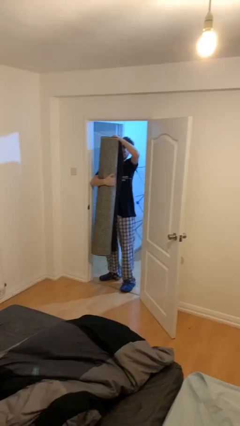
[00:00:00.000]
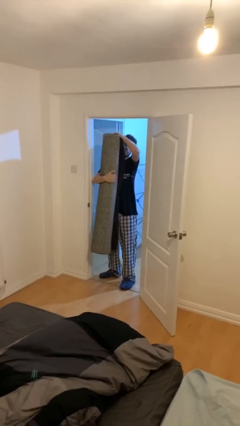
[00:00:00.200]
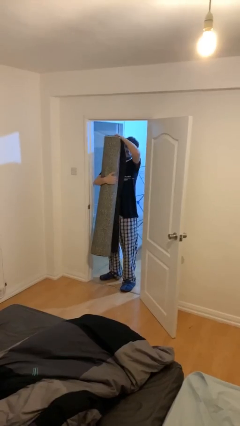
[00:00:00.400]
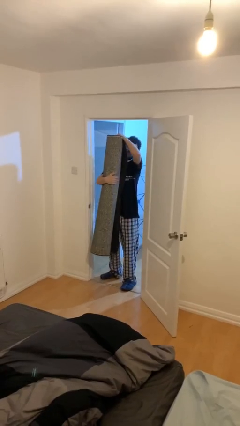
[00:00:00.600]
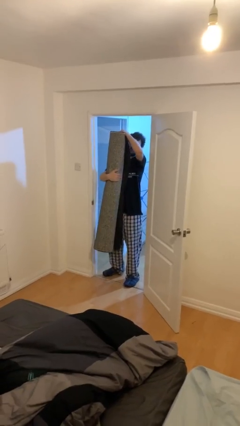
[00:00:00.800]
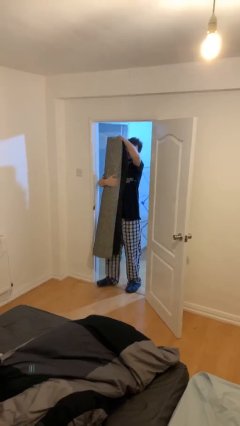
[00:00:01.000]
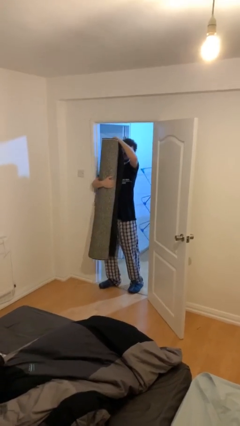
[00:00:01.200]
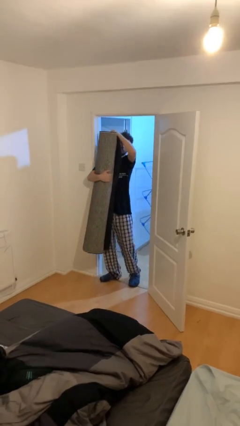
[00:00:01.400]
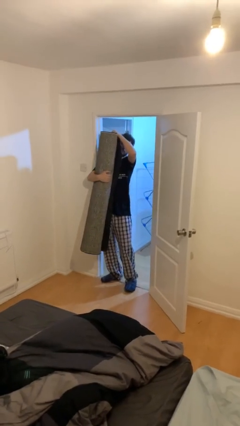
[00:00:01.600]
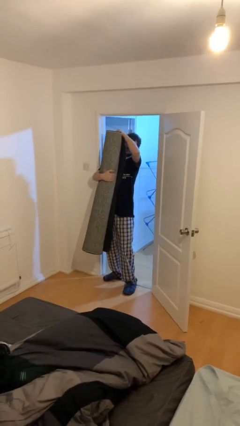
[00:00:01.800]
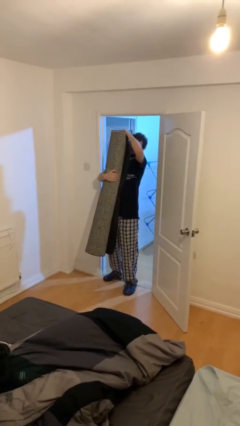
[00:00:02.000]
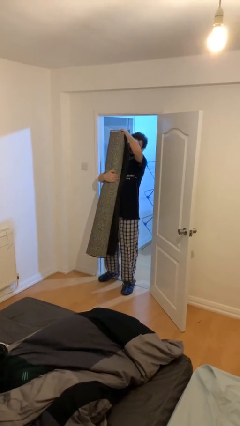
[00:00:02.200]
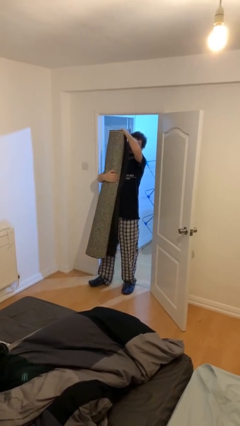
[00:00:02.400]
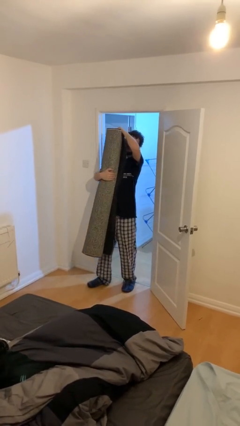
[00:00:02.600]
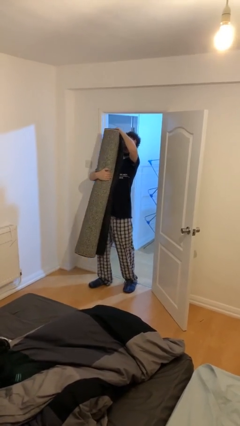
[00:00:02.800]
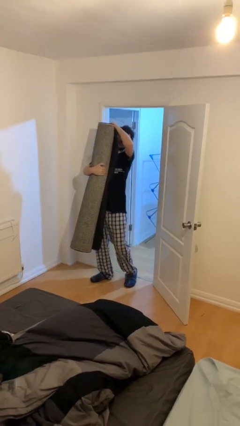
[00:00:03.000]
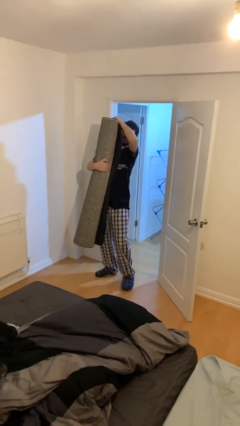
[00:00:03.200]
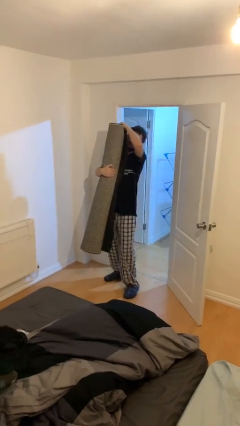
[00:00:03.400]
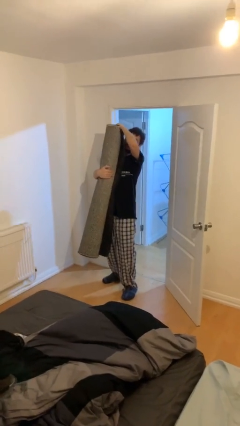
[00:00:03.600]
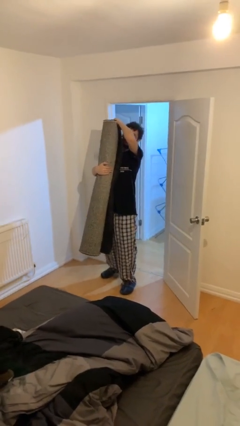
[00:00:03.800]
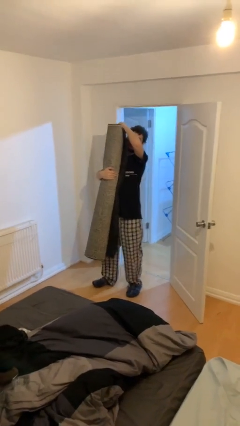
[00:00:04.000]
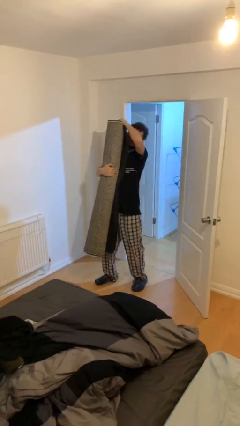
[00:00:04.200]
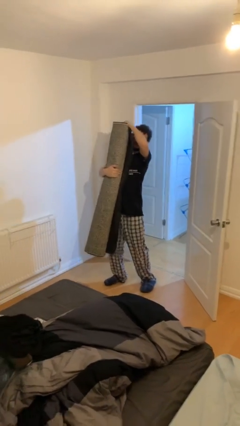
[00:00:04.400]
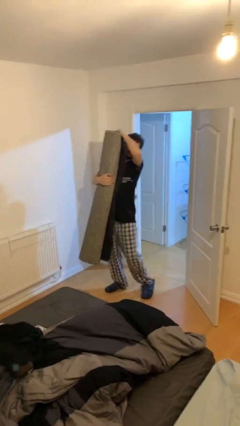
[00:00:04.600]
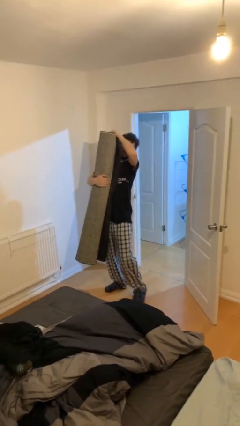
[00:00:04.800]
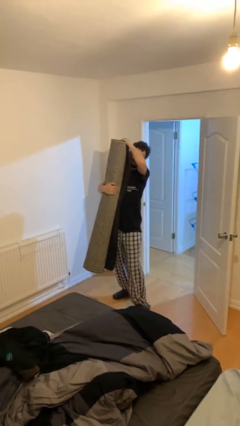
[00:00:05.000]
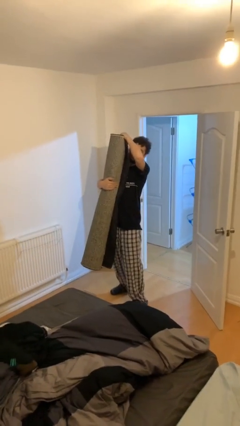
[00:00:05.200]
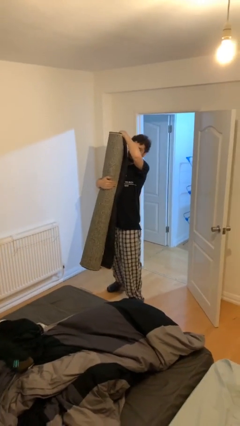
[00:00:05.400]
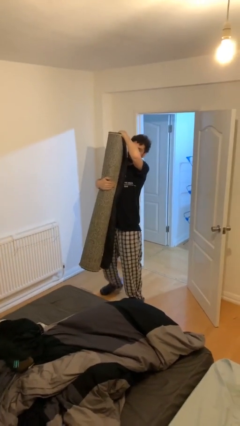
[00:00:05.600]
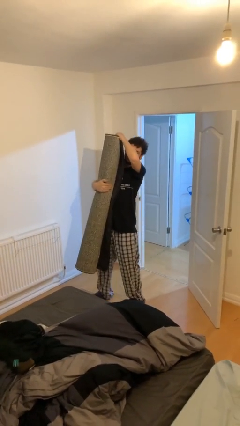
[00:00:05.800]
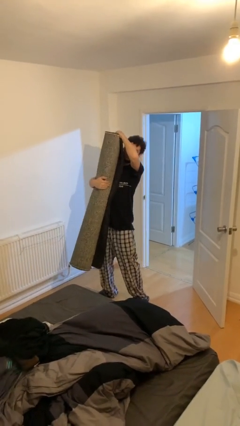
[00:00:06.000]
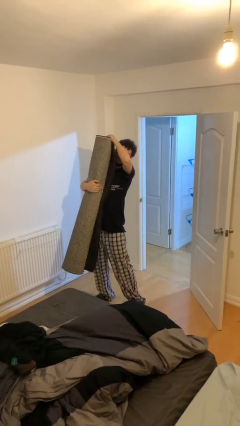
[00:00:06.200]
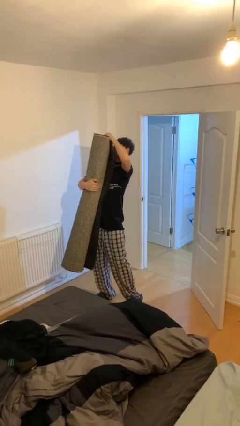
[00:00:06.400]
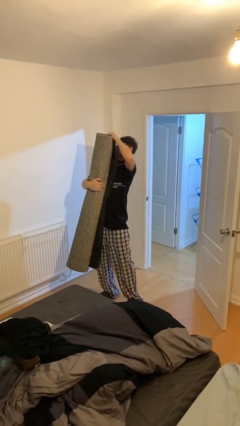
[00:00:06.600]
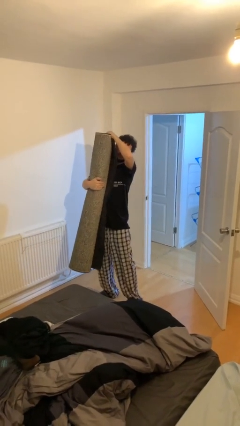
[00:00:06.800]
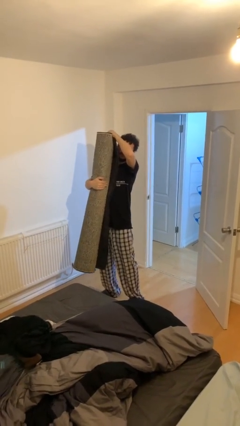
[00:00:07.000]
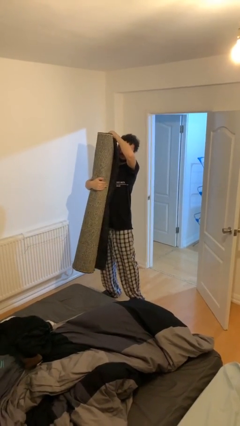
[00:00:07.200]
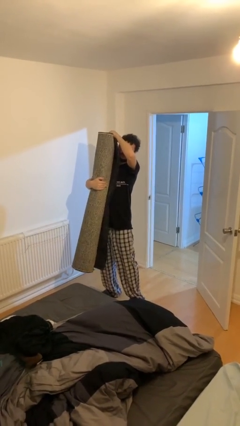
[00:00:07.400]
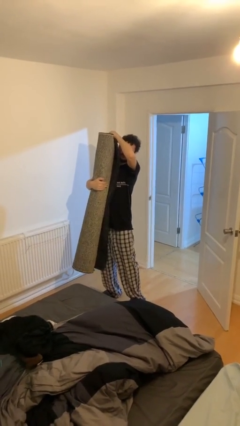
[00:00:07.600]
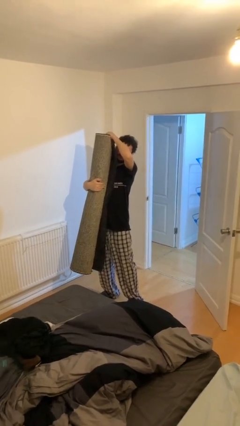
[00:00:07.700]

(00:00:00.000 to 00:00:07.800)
person carries heavy object

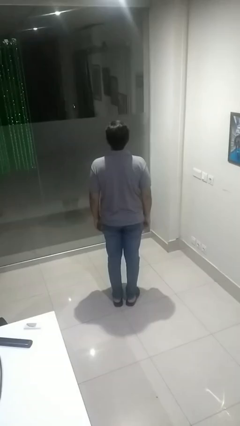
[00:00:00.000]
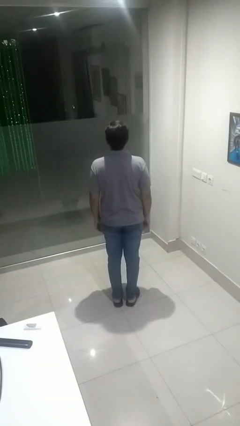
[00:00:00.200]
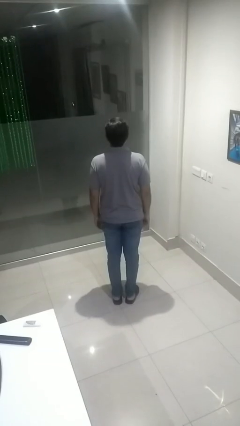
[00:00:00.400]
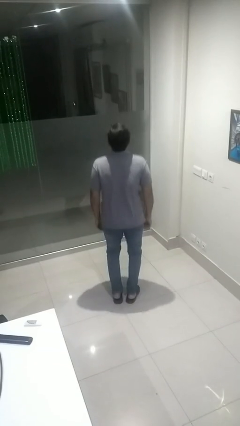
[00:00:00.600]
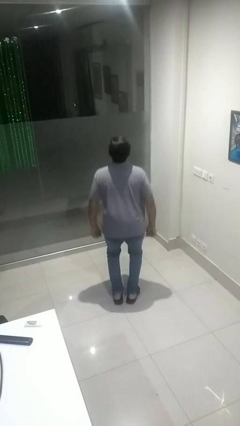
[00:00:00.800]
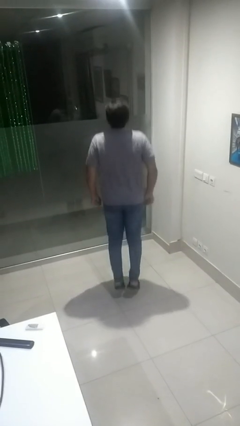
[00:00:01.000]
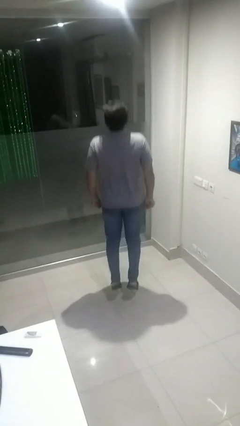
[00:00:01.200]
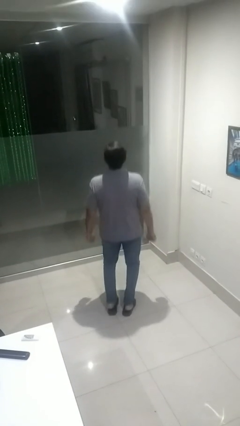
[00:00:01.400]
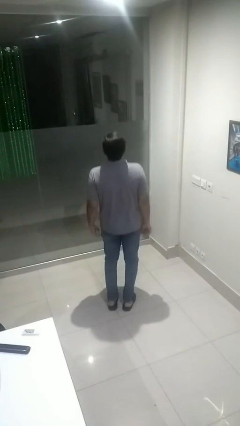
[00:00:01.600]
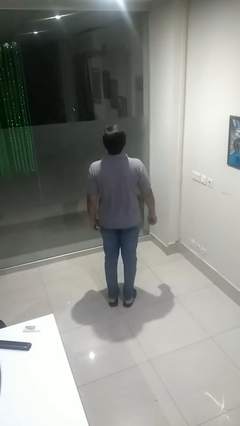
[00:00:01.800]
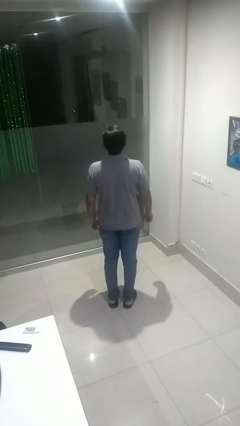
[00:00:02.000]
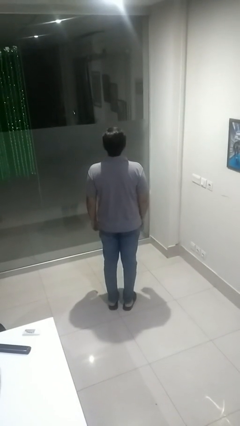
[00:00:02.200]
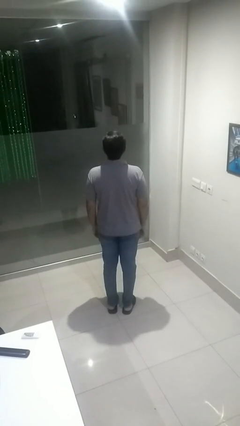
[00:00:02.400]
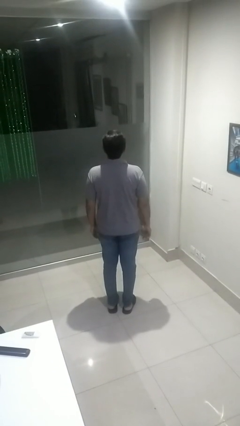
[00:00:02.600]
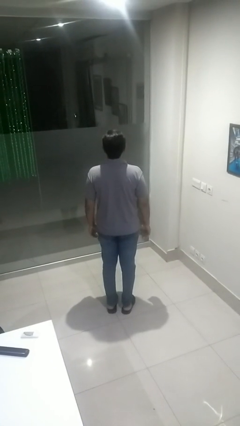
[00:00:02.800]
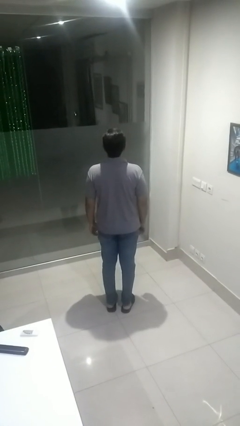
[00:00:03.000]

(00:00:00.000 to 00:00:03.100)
person jumps

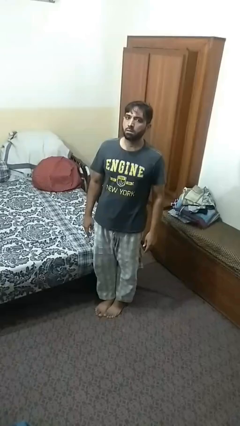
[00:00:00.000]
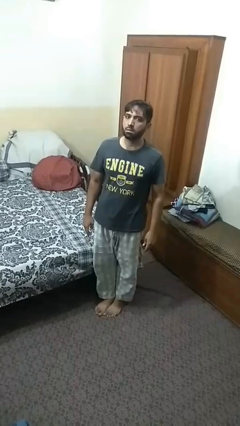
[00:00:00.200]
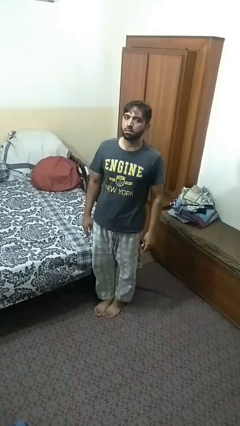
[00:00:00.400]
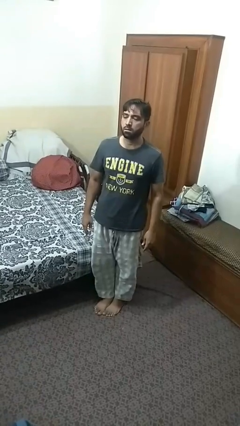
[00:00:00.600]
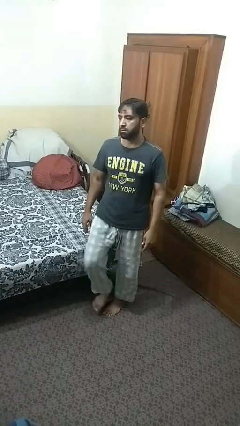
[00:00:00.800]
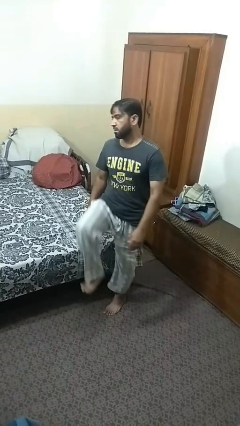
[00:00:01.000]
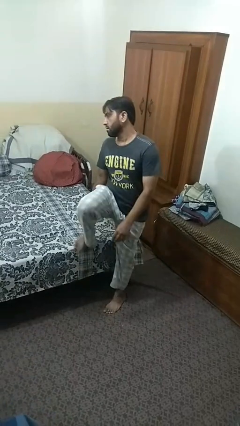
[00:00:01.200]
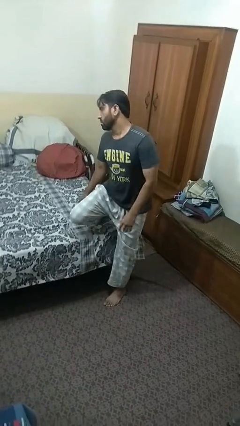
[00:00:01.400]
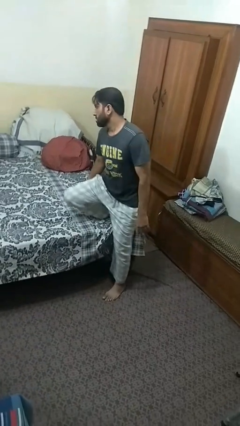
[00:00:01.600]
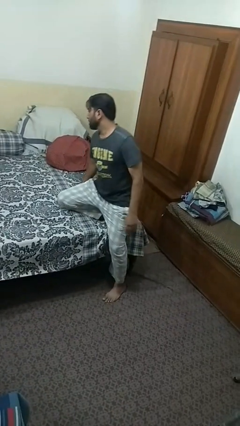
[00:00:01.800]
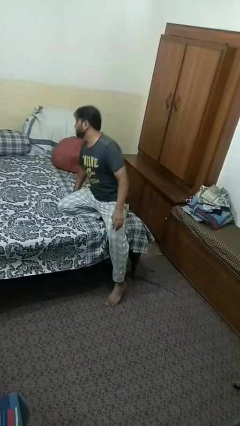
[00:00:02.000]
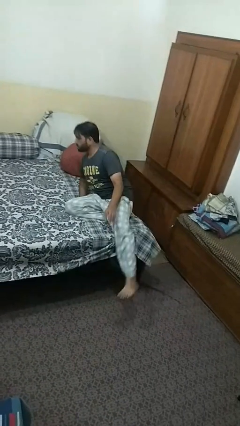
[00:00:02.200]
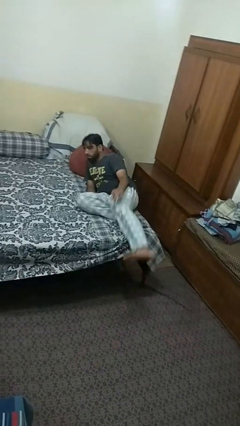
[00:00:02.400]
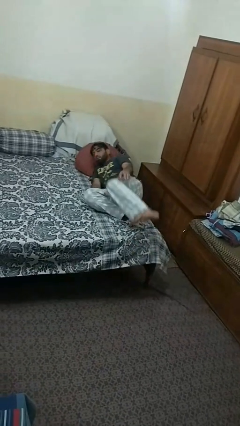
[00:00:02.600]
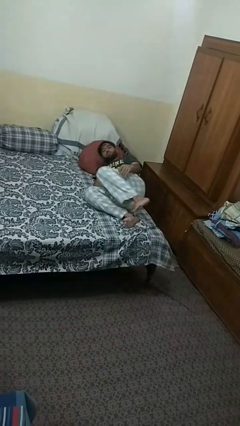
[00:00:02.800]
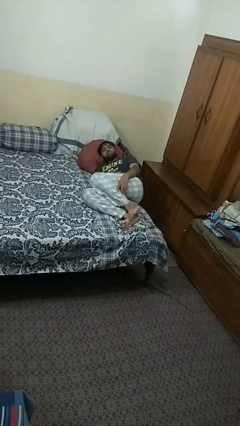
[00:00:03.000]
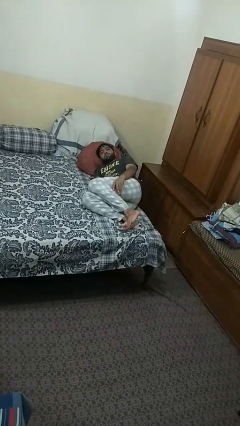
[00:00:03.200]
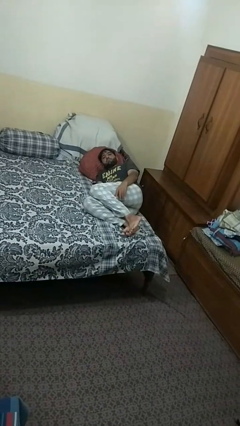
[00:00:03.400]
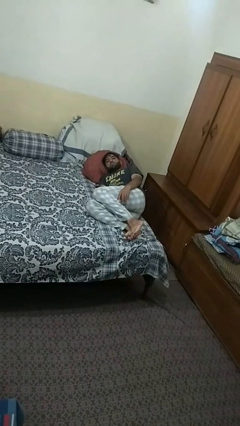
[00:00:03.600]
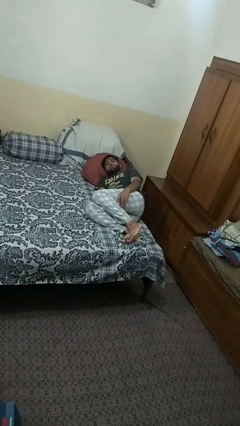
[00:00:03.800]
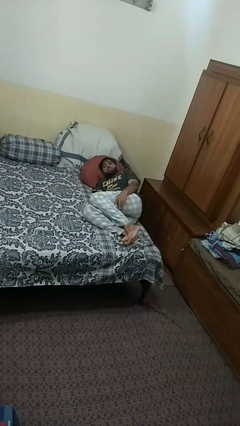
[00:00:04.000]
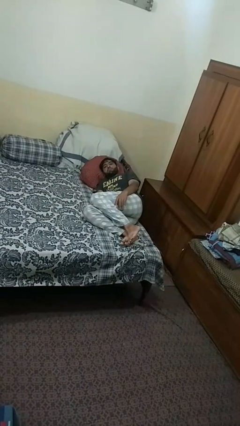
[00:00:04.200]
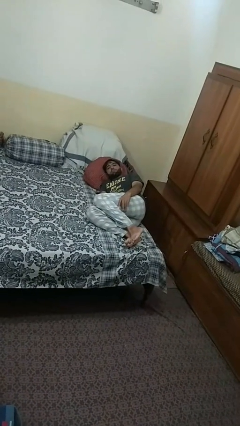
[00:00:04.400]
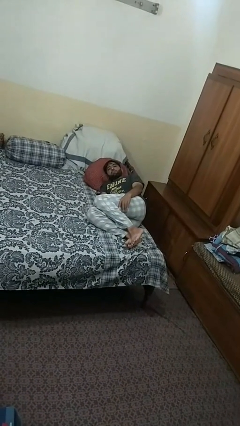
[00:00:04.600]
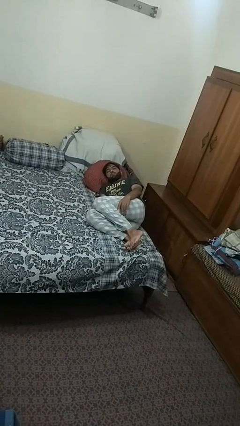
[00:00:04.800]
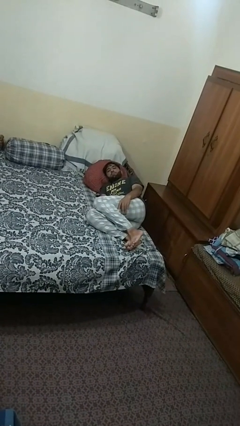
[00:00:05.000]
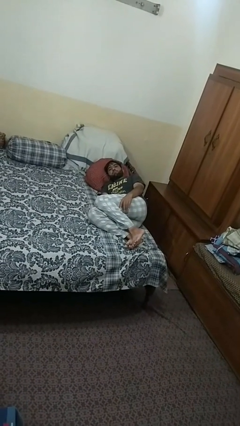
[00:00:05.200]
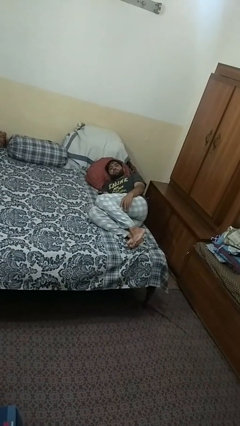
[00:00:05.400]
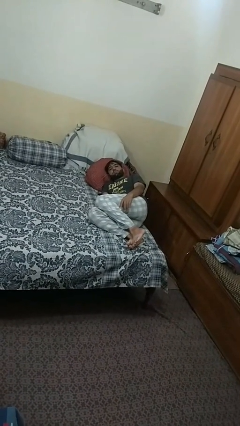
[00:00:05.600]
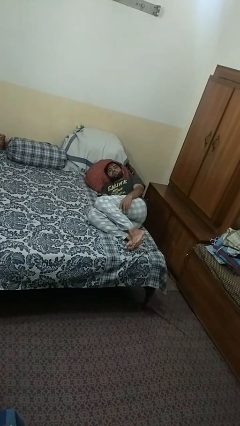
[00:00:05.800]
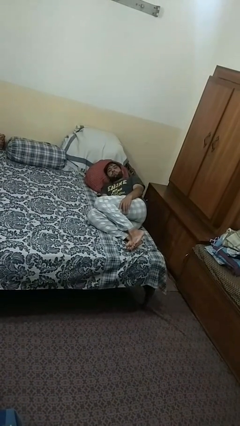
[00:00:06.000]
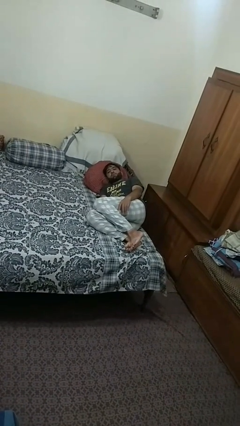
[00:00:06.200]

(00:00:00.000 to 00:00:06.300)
person lies down on bed

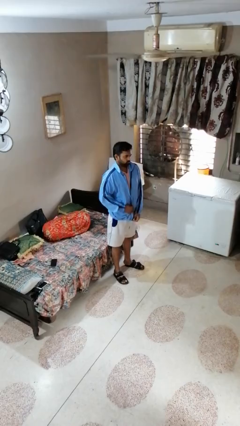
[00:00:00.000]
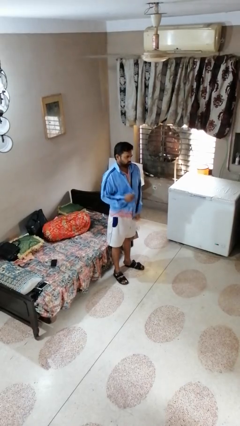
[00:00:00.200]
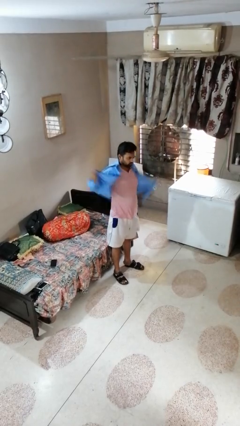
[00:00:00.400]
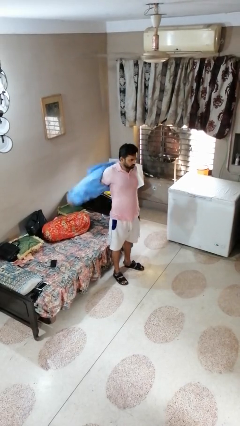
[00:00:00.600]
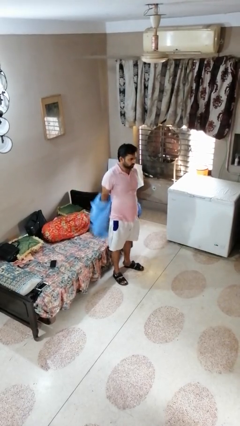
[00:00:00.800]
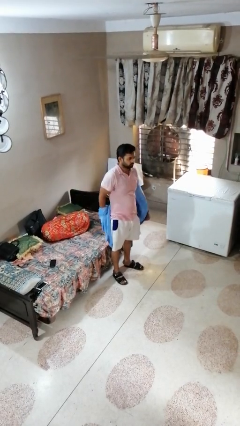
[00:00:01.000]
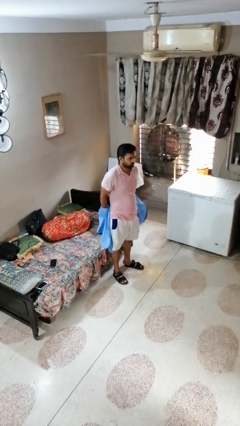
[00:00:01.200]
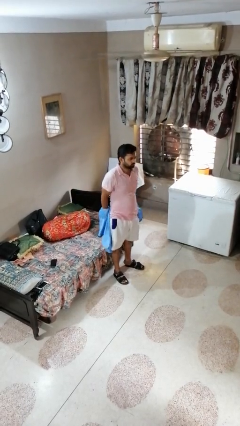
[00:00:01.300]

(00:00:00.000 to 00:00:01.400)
person takes off jacket
